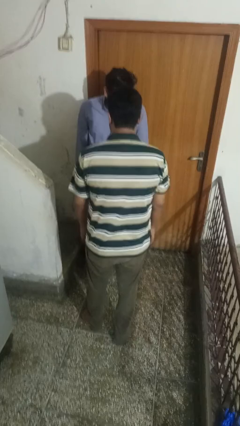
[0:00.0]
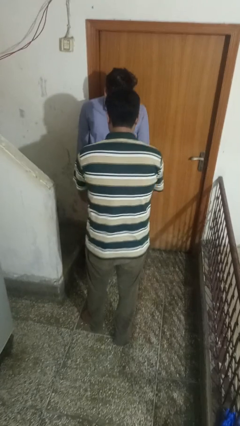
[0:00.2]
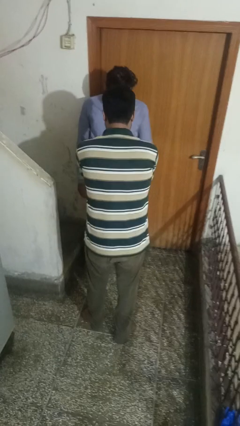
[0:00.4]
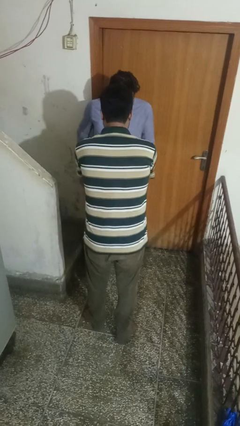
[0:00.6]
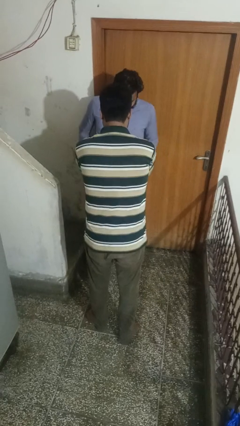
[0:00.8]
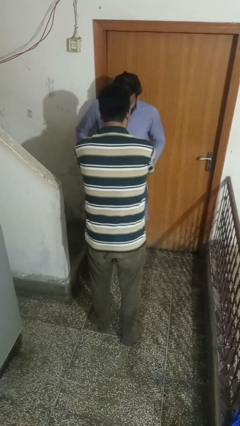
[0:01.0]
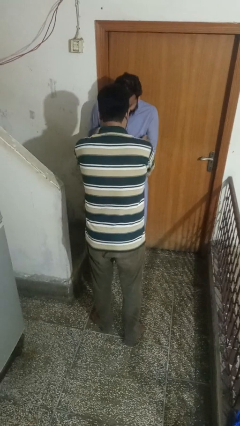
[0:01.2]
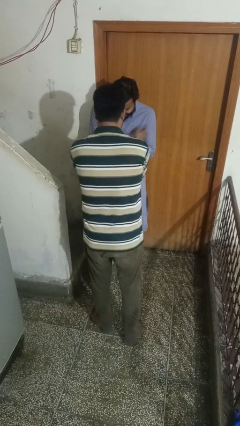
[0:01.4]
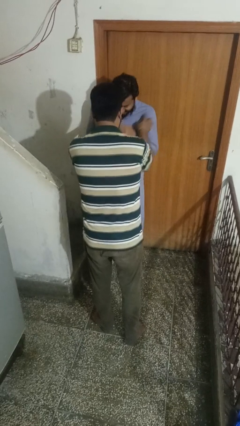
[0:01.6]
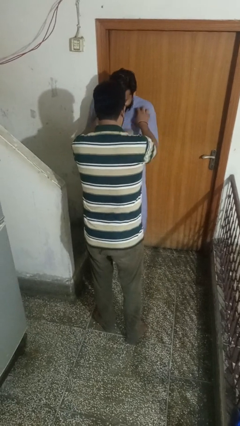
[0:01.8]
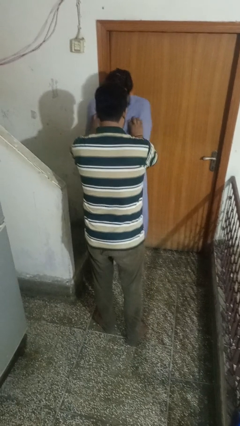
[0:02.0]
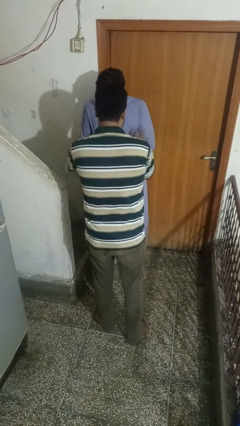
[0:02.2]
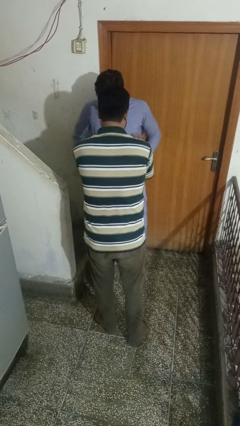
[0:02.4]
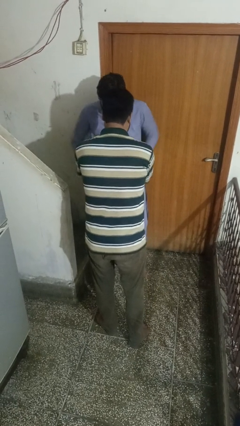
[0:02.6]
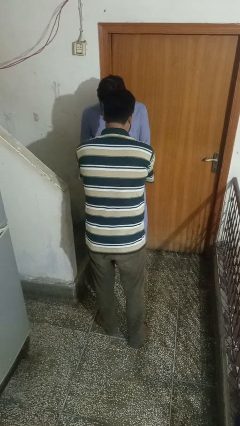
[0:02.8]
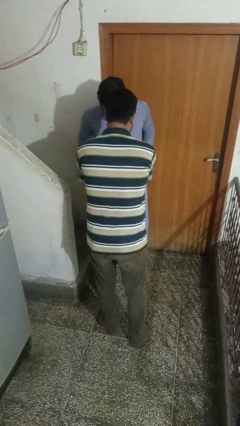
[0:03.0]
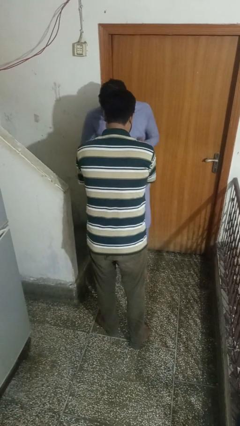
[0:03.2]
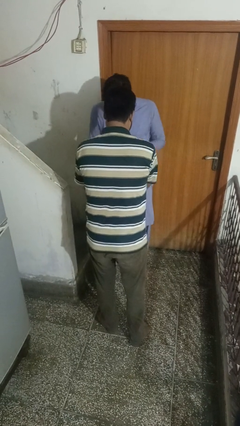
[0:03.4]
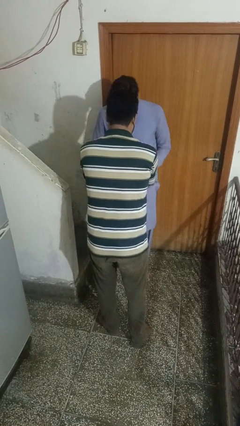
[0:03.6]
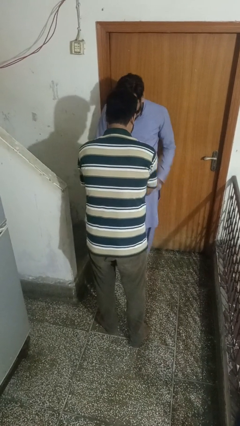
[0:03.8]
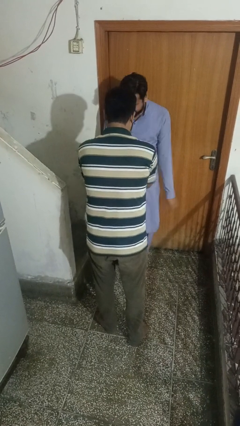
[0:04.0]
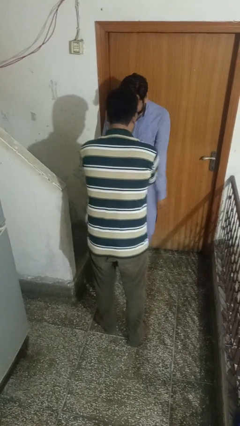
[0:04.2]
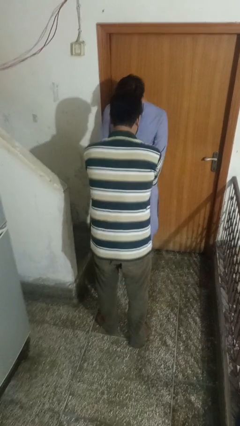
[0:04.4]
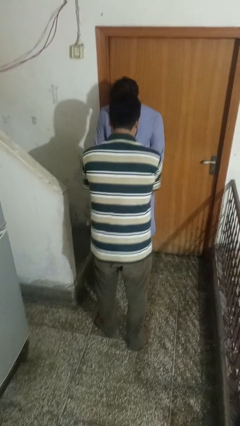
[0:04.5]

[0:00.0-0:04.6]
person tickles person

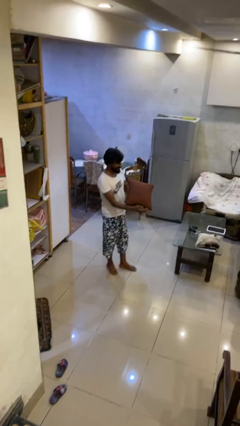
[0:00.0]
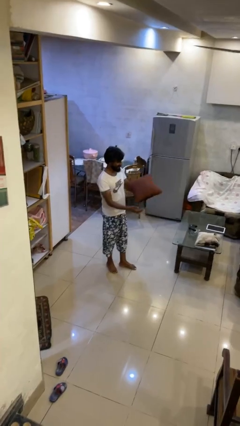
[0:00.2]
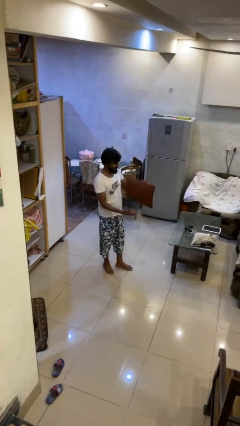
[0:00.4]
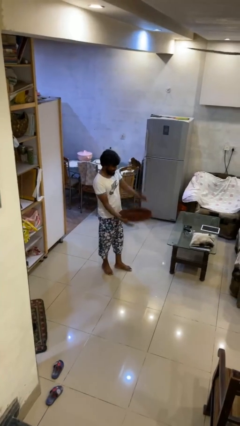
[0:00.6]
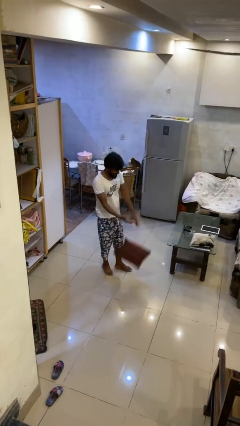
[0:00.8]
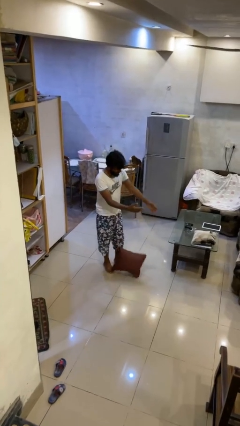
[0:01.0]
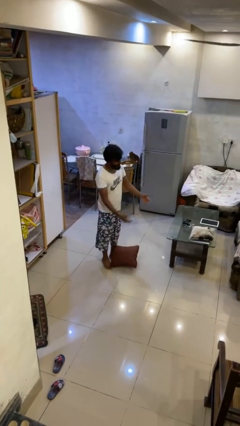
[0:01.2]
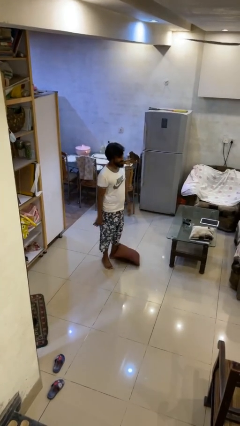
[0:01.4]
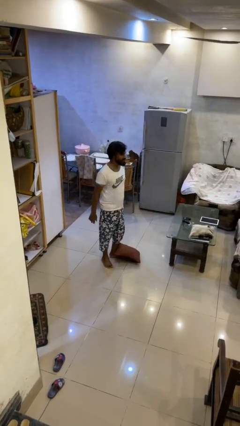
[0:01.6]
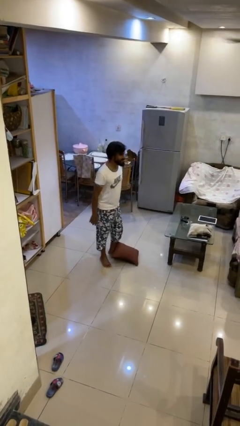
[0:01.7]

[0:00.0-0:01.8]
person drops object

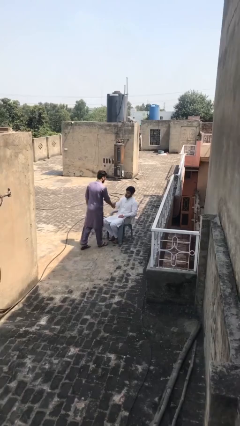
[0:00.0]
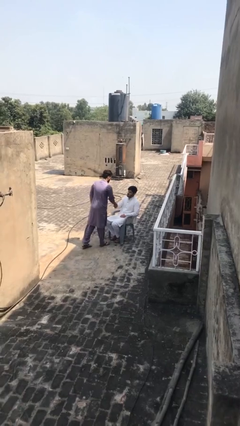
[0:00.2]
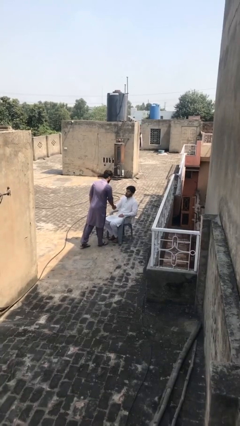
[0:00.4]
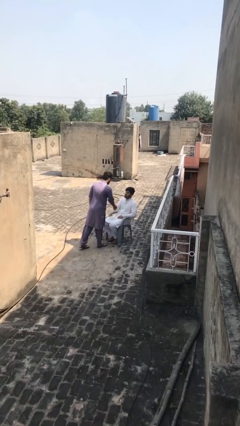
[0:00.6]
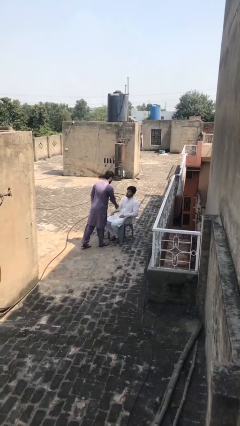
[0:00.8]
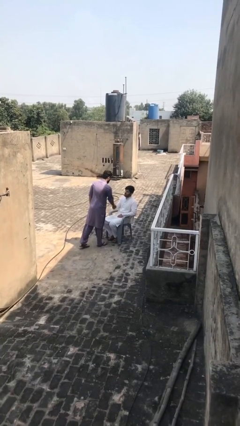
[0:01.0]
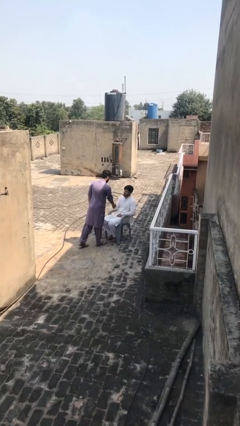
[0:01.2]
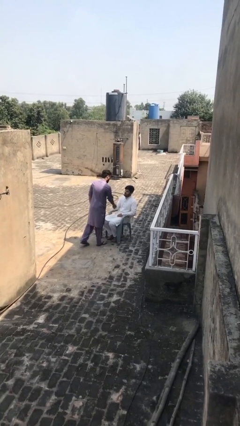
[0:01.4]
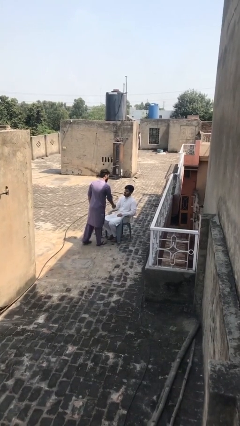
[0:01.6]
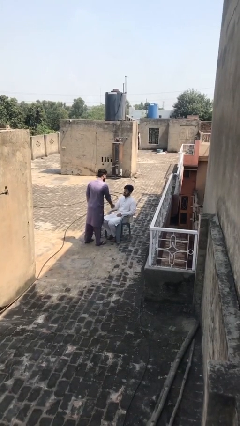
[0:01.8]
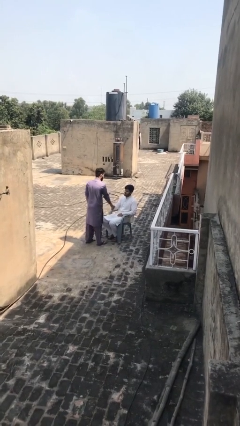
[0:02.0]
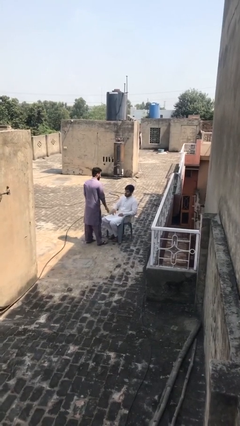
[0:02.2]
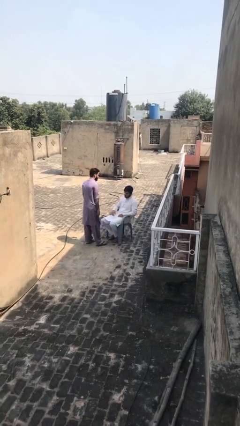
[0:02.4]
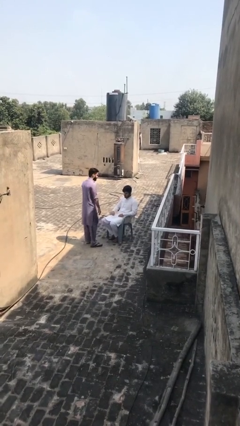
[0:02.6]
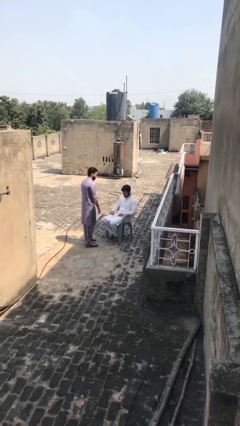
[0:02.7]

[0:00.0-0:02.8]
person shakes hand

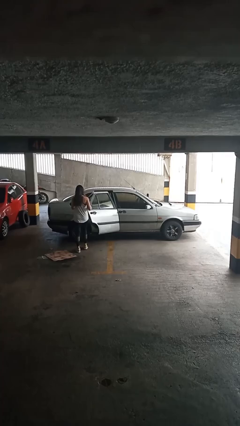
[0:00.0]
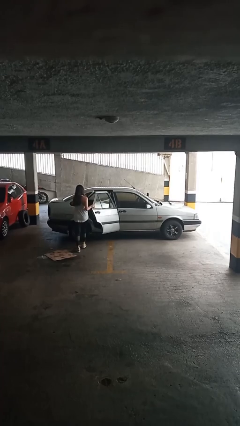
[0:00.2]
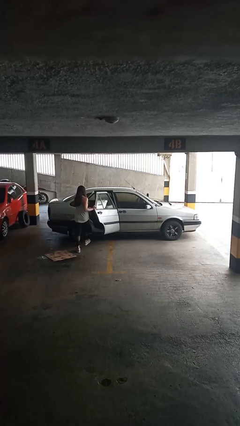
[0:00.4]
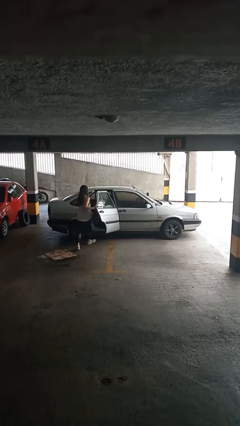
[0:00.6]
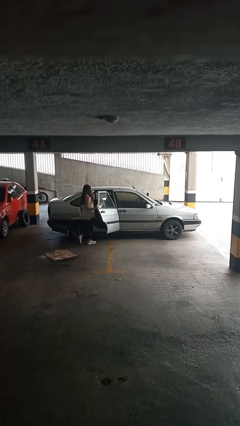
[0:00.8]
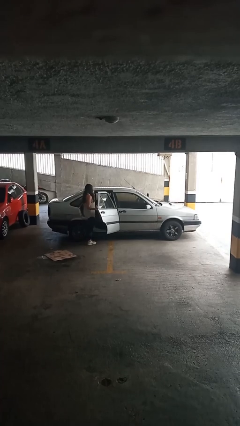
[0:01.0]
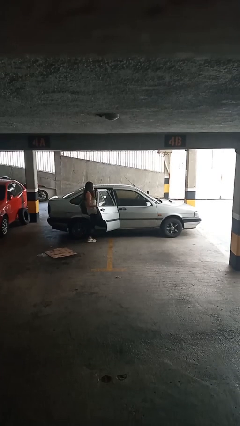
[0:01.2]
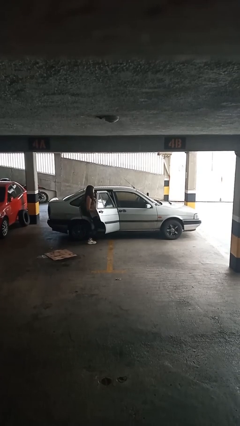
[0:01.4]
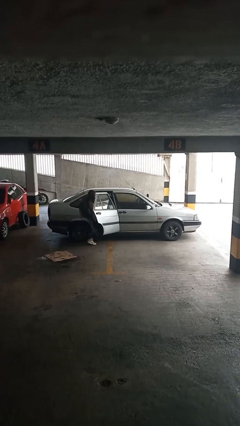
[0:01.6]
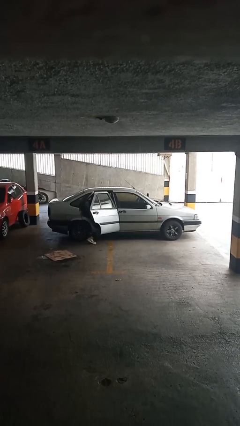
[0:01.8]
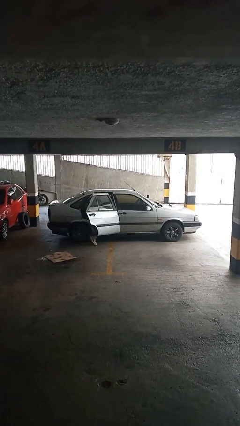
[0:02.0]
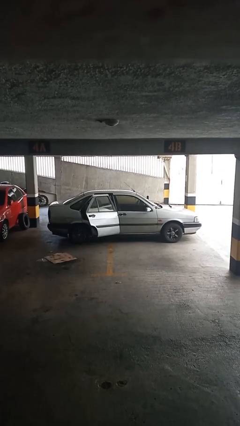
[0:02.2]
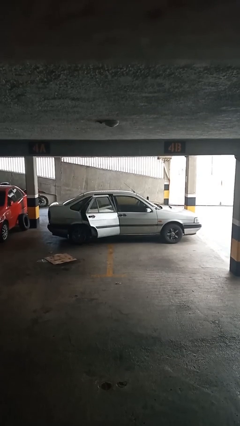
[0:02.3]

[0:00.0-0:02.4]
car picks up person

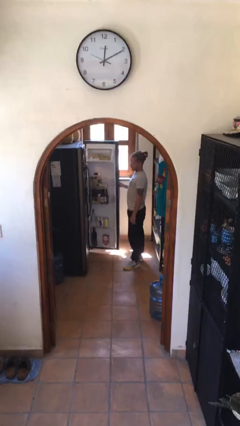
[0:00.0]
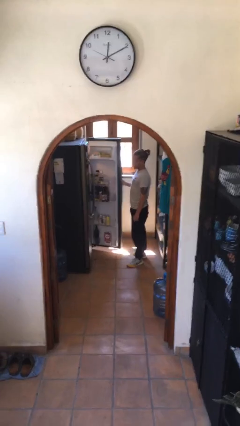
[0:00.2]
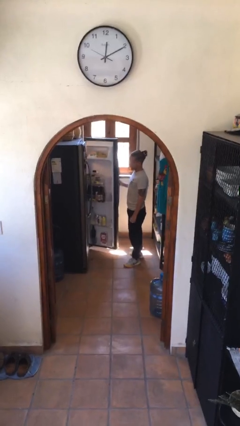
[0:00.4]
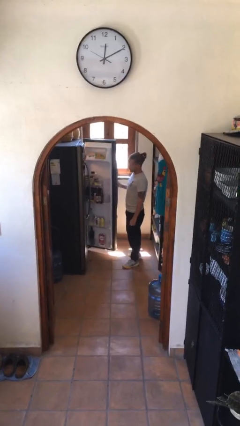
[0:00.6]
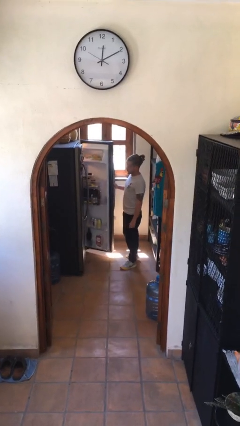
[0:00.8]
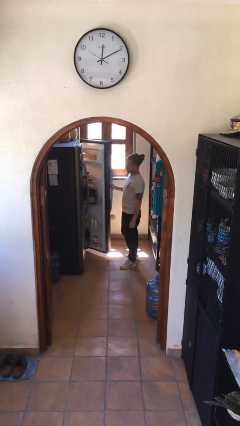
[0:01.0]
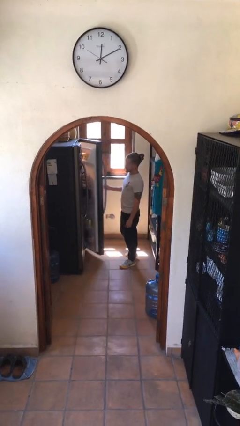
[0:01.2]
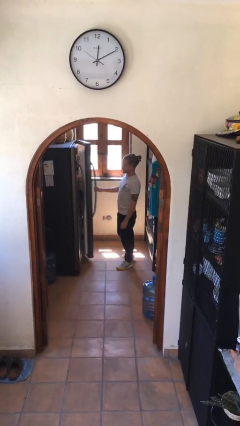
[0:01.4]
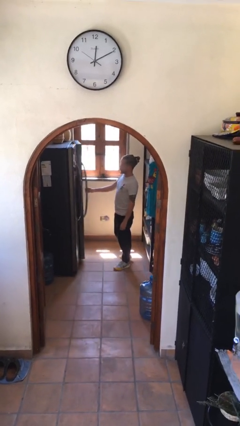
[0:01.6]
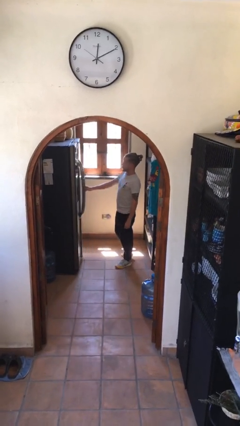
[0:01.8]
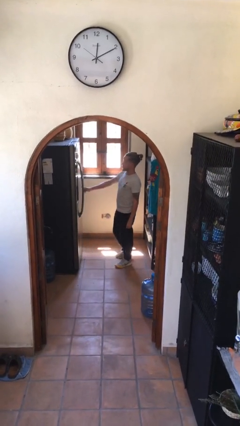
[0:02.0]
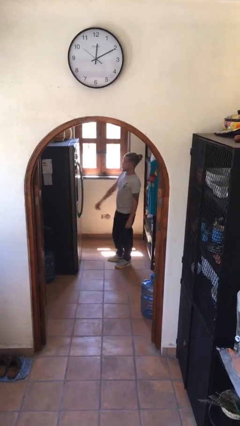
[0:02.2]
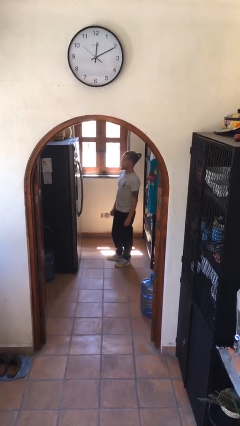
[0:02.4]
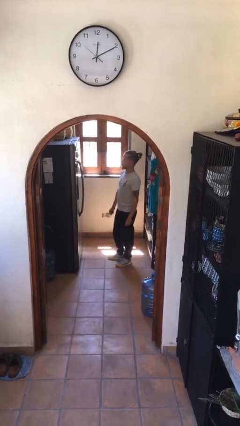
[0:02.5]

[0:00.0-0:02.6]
person closes refrigerator

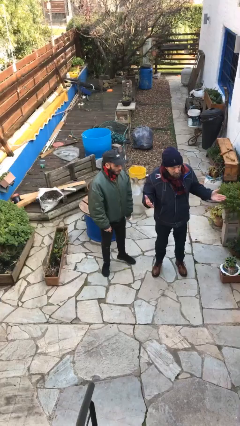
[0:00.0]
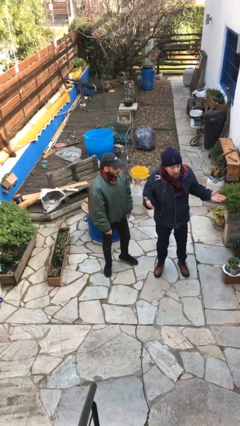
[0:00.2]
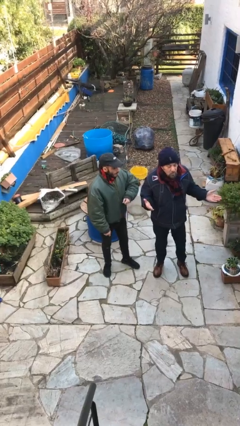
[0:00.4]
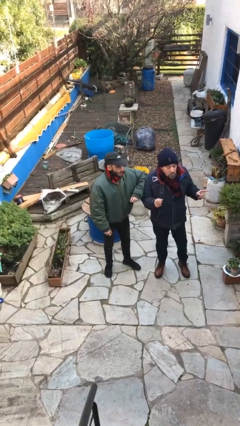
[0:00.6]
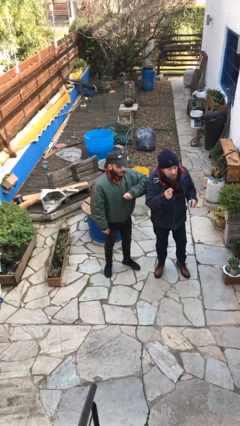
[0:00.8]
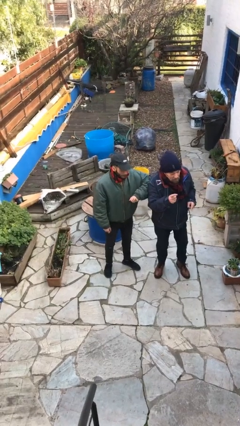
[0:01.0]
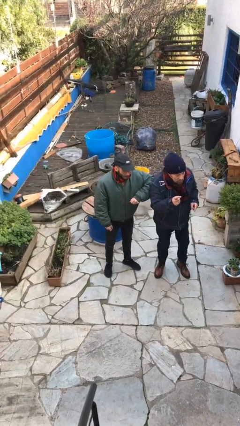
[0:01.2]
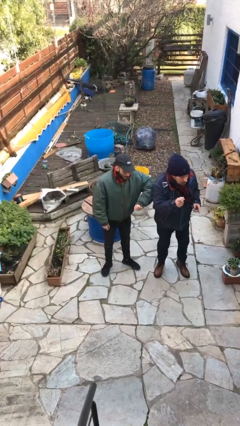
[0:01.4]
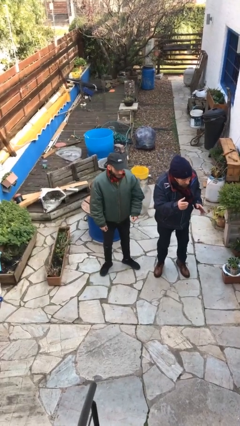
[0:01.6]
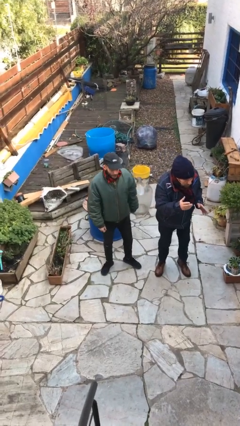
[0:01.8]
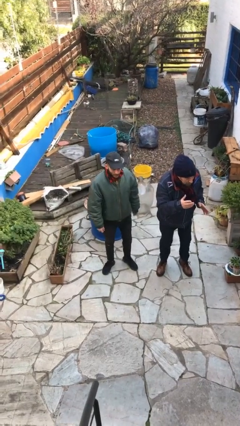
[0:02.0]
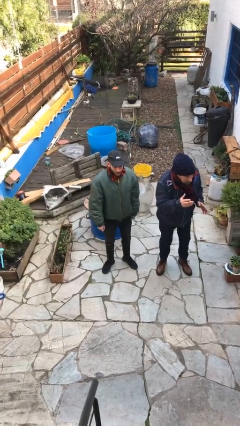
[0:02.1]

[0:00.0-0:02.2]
person nudges person with elbow

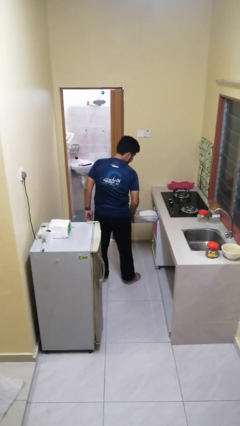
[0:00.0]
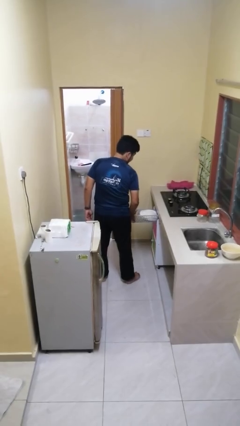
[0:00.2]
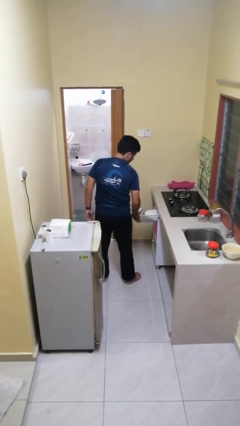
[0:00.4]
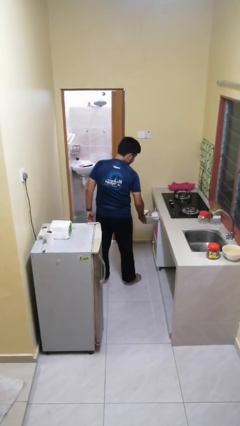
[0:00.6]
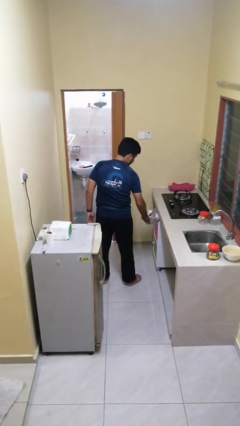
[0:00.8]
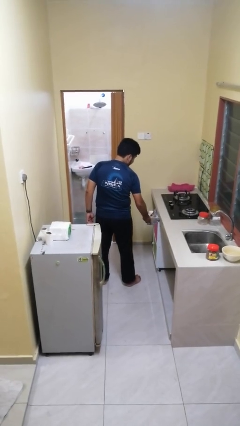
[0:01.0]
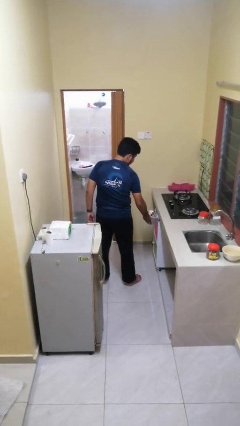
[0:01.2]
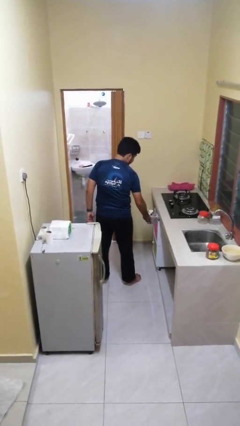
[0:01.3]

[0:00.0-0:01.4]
person closes kitchen drawer
